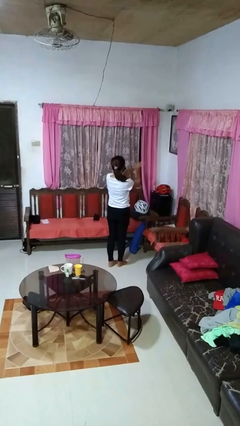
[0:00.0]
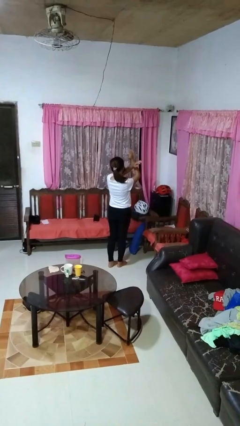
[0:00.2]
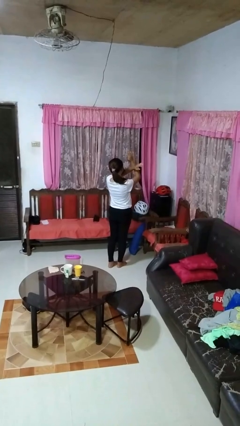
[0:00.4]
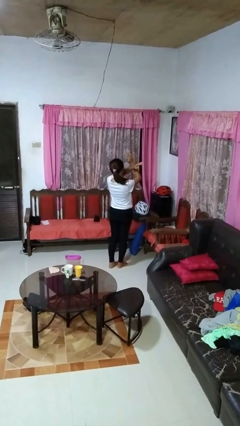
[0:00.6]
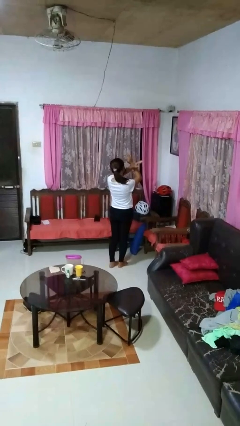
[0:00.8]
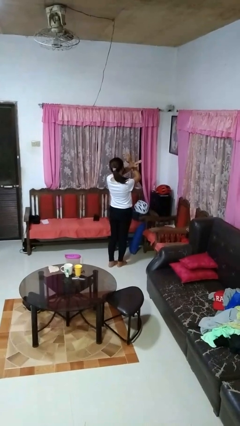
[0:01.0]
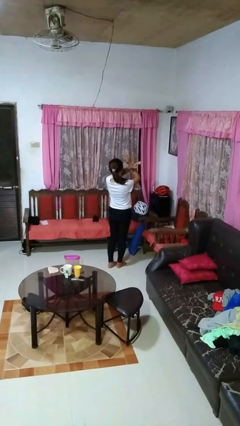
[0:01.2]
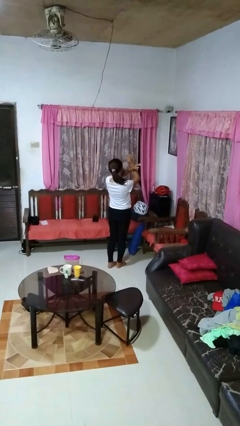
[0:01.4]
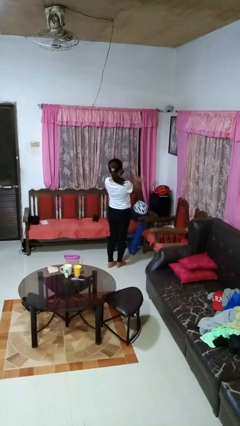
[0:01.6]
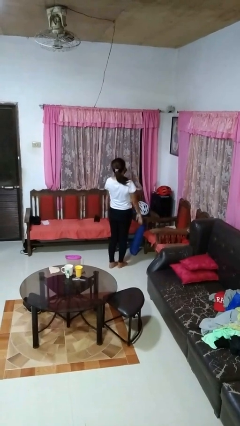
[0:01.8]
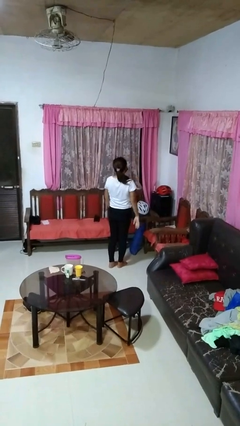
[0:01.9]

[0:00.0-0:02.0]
person gestures arms x

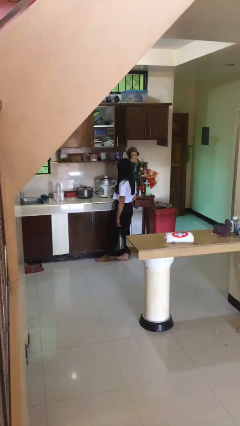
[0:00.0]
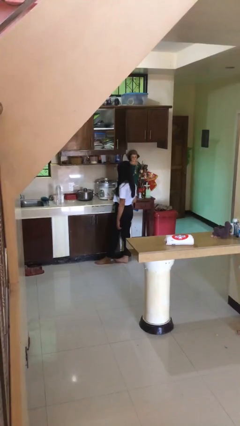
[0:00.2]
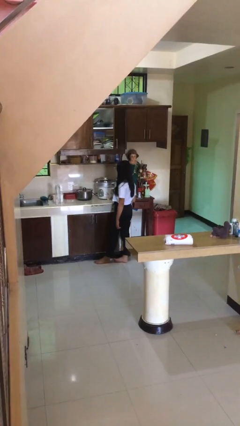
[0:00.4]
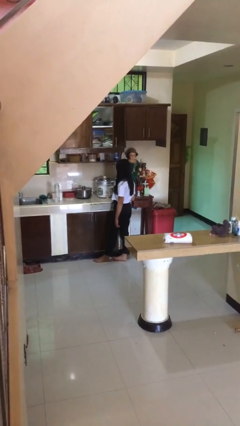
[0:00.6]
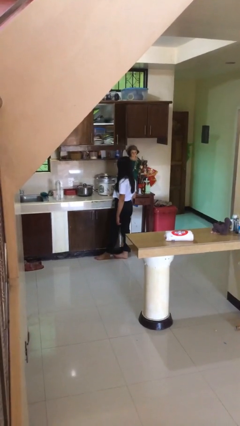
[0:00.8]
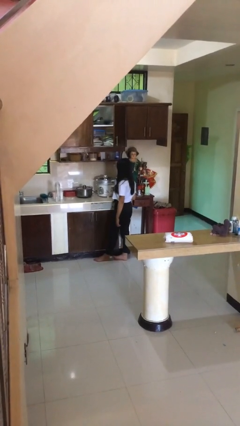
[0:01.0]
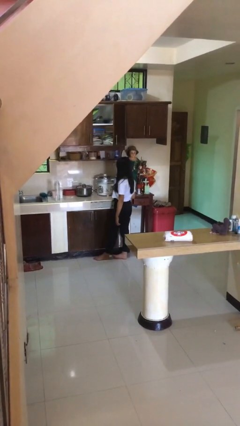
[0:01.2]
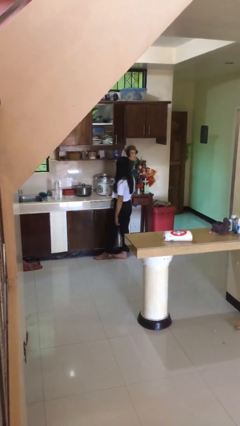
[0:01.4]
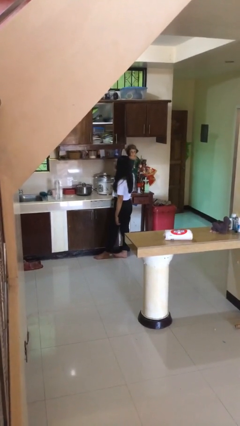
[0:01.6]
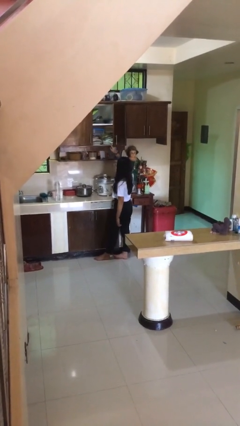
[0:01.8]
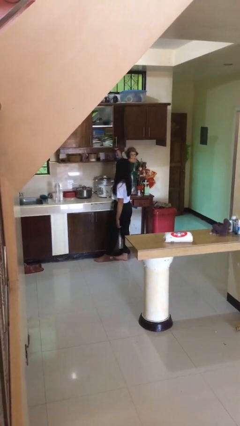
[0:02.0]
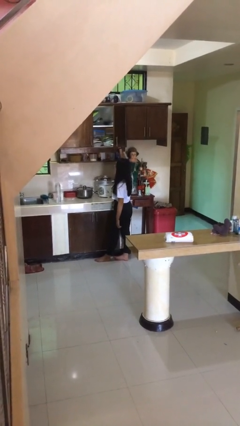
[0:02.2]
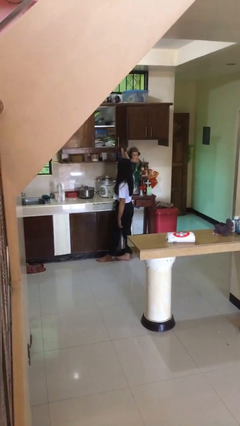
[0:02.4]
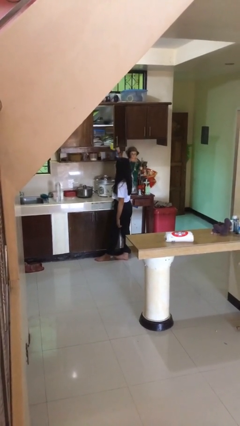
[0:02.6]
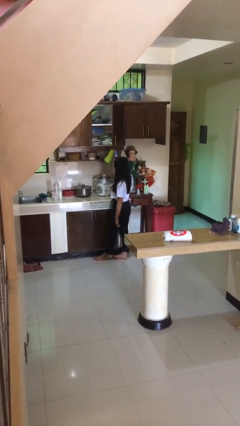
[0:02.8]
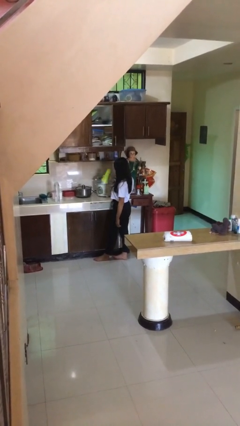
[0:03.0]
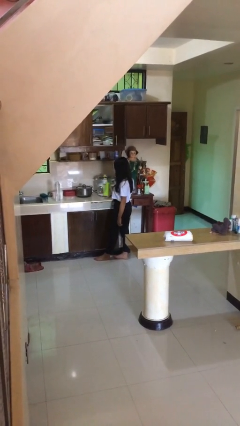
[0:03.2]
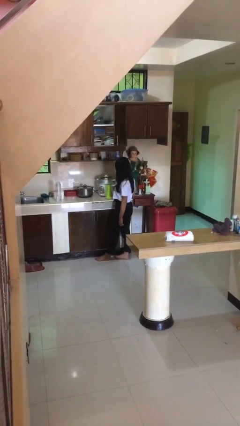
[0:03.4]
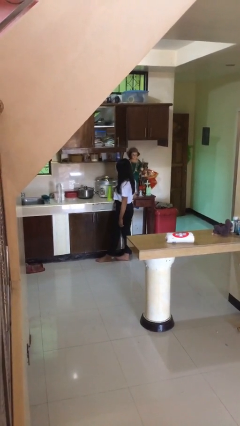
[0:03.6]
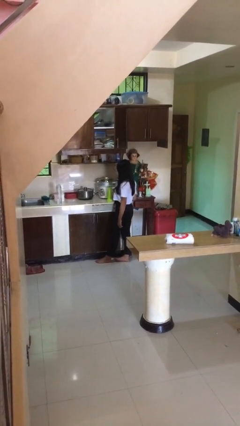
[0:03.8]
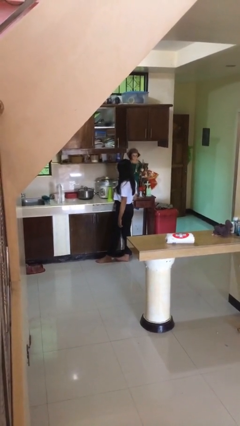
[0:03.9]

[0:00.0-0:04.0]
person picks up object from cabinet

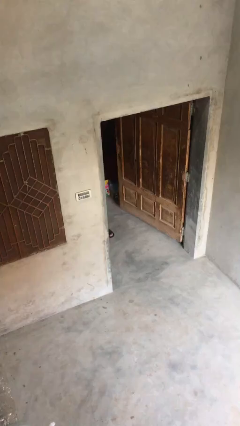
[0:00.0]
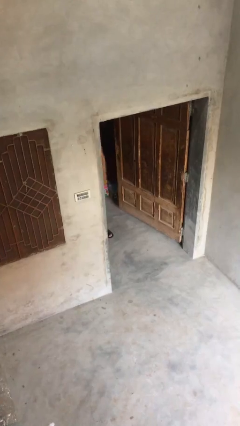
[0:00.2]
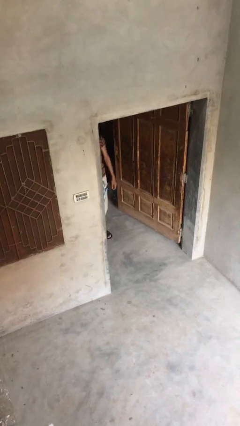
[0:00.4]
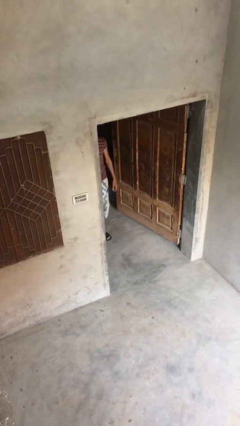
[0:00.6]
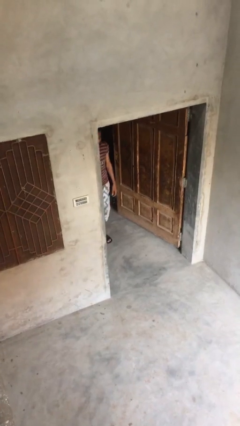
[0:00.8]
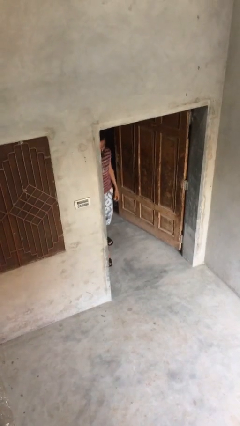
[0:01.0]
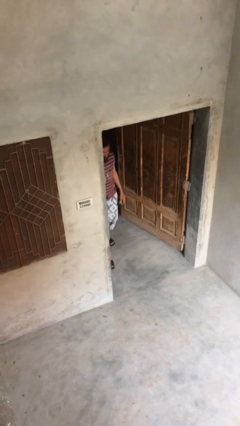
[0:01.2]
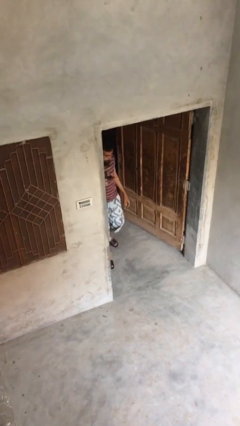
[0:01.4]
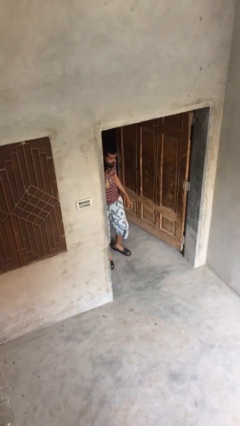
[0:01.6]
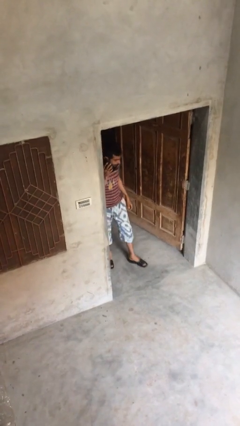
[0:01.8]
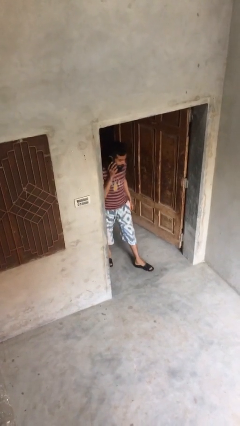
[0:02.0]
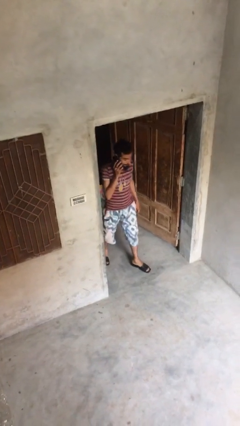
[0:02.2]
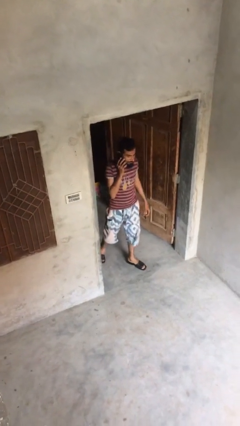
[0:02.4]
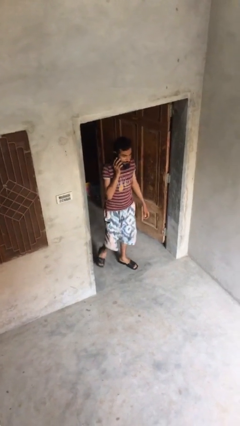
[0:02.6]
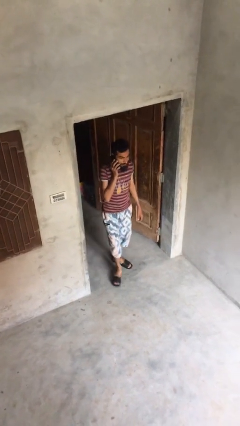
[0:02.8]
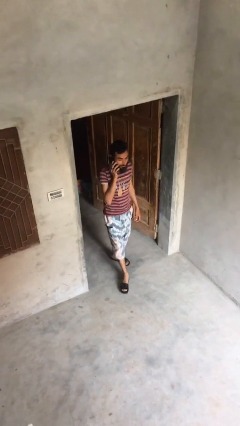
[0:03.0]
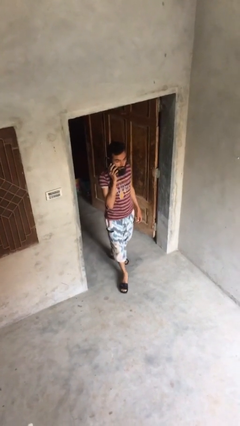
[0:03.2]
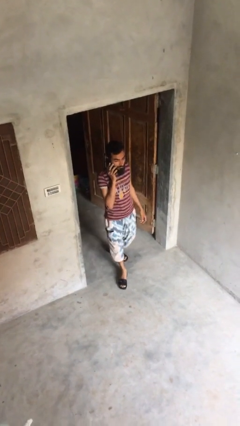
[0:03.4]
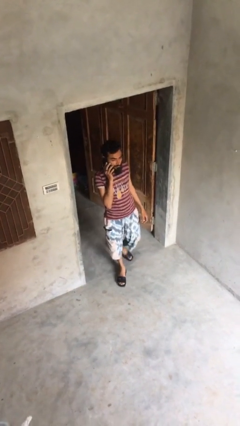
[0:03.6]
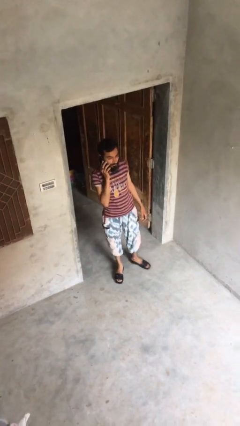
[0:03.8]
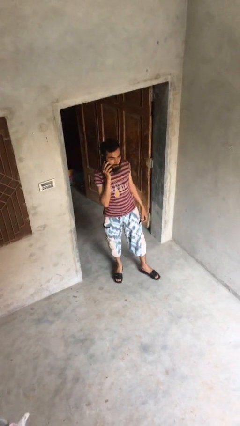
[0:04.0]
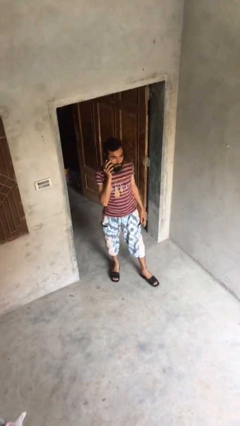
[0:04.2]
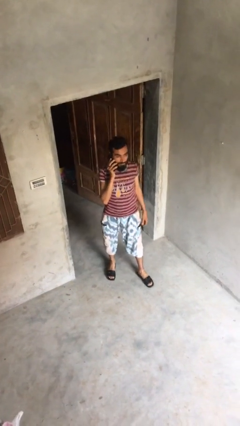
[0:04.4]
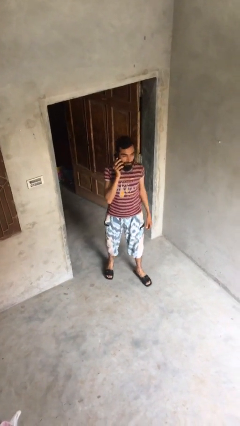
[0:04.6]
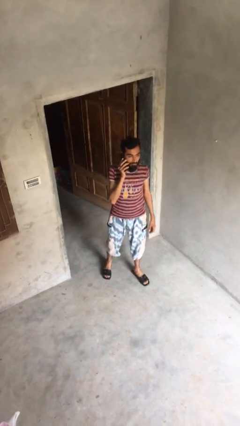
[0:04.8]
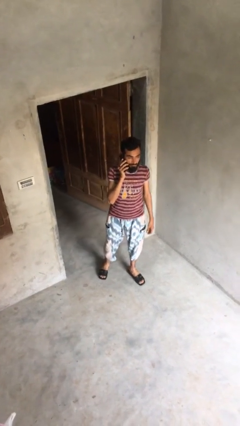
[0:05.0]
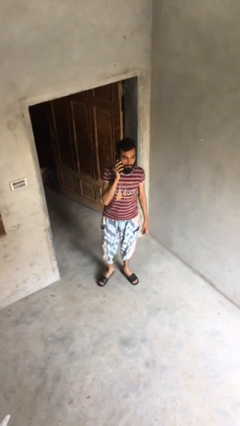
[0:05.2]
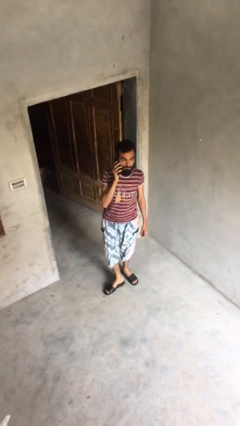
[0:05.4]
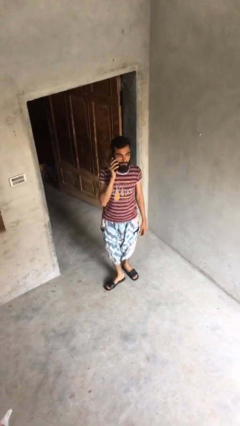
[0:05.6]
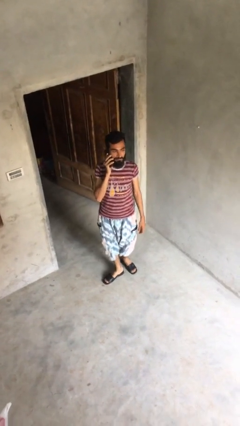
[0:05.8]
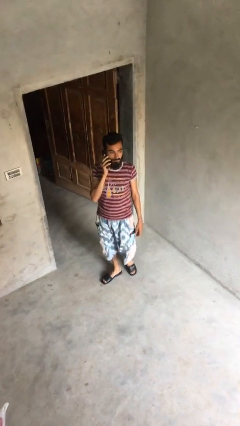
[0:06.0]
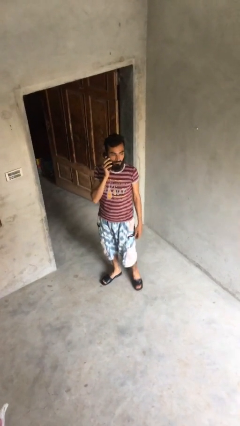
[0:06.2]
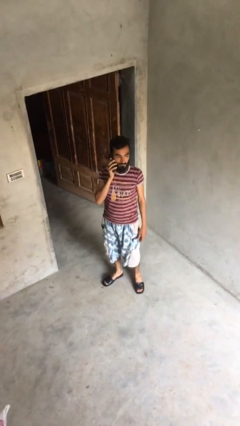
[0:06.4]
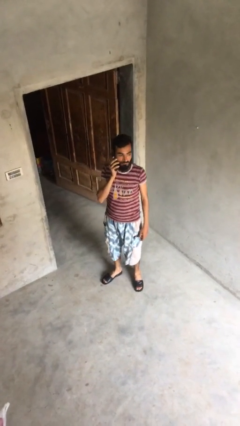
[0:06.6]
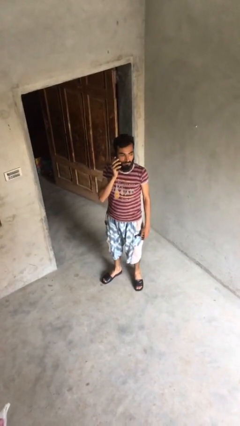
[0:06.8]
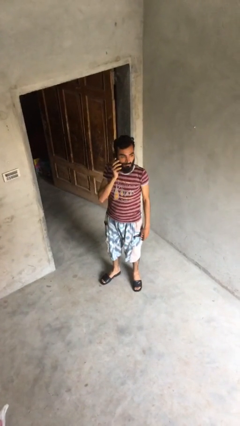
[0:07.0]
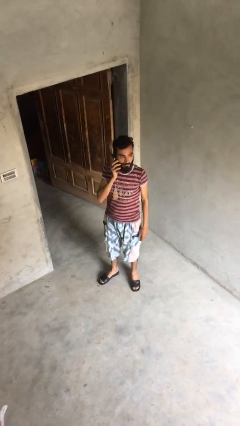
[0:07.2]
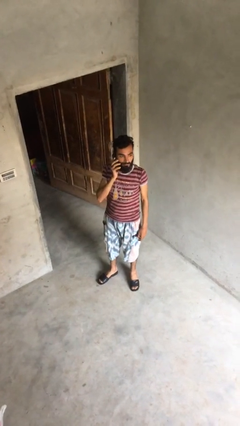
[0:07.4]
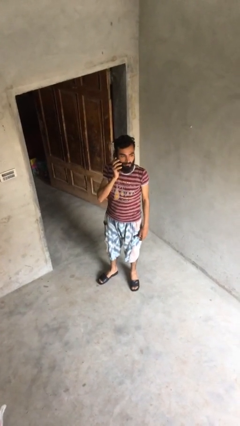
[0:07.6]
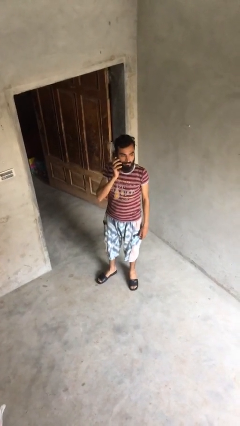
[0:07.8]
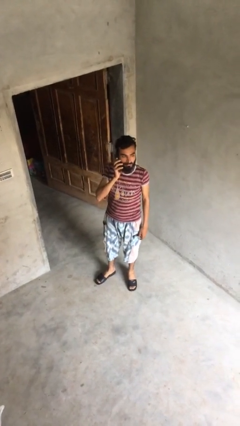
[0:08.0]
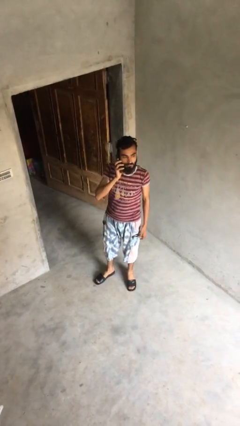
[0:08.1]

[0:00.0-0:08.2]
person enters scene through structure

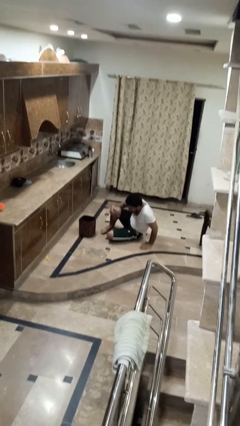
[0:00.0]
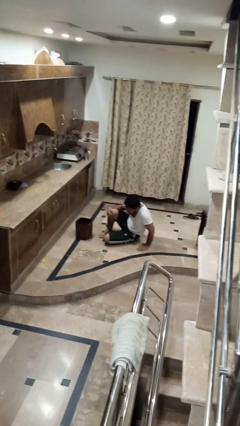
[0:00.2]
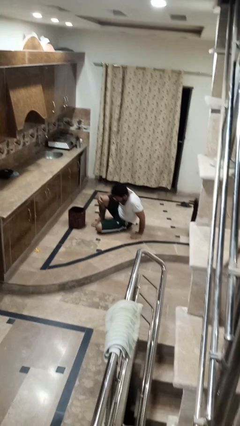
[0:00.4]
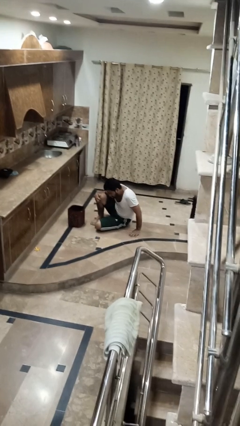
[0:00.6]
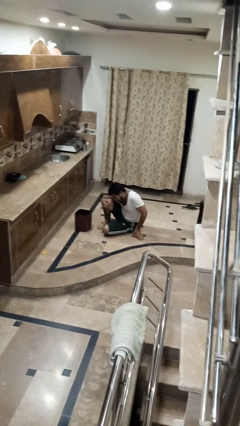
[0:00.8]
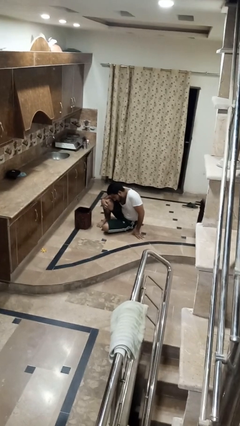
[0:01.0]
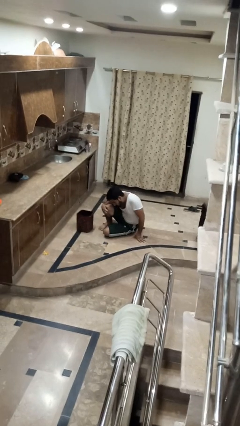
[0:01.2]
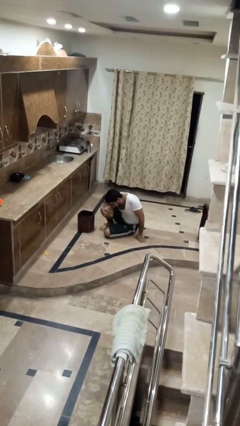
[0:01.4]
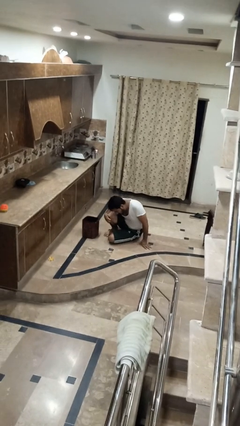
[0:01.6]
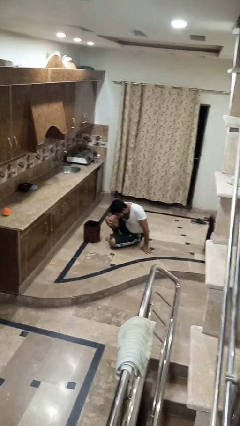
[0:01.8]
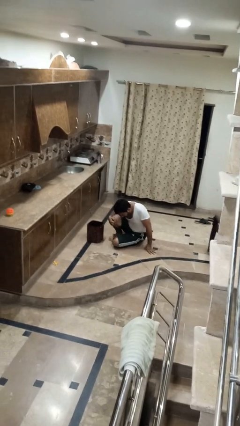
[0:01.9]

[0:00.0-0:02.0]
person lies down on floor

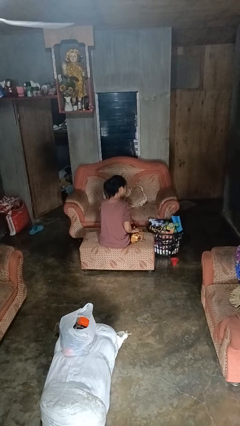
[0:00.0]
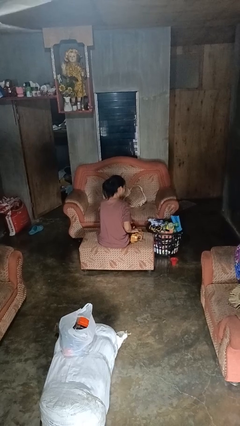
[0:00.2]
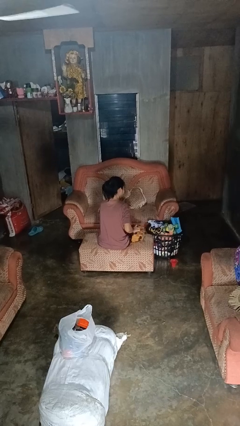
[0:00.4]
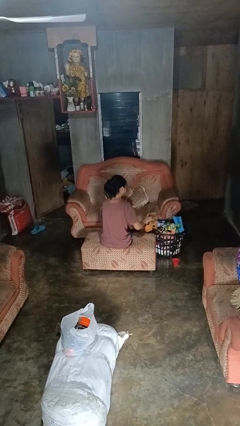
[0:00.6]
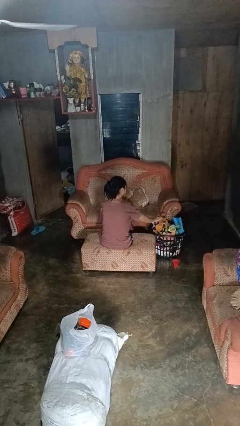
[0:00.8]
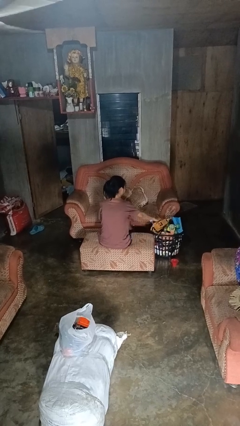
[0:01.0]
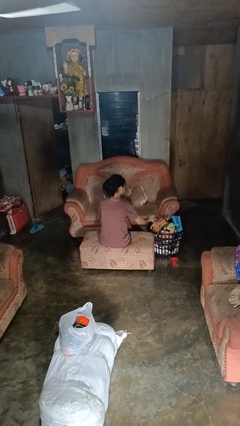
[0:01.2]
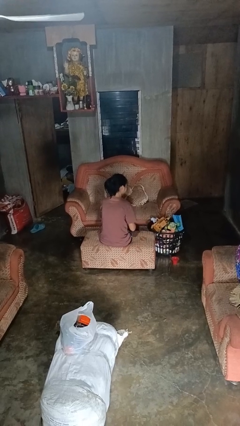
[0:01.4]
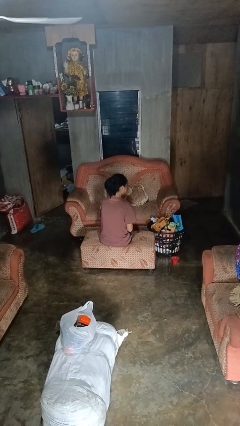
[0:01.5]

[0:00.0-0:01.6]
person puts object into basket
